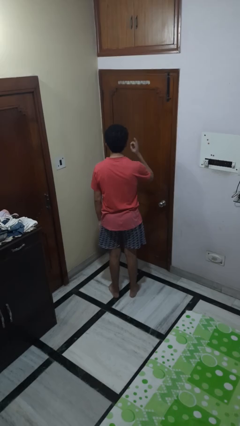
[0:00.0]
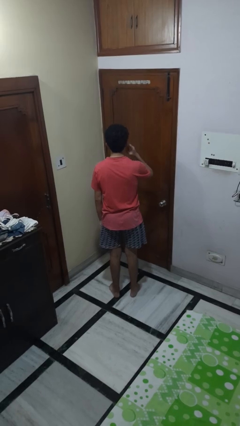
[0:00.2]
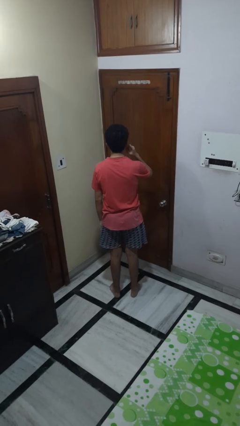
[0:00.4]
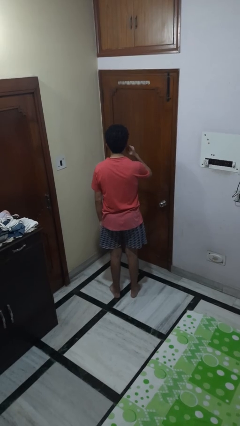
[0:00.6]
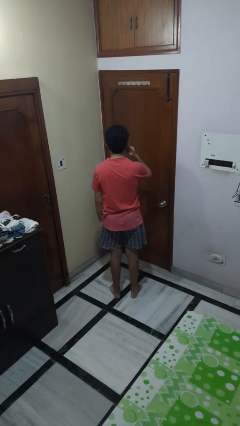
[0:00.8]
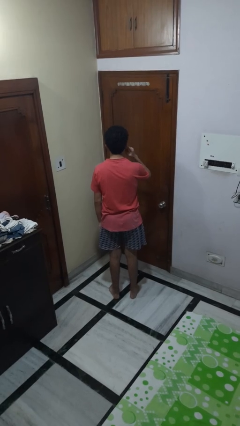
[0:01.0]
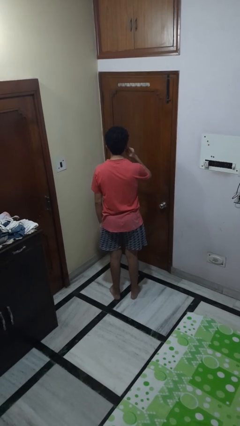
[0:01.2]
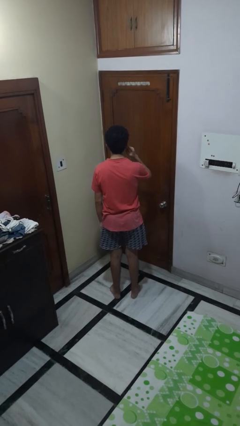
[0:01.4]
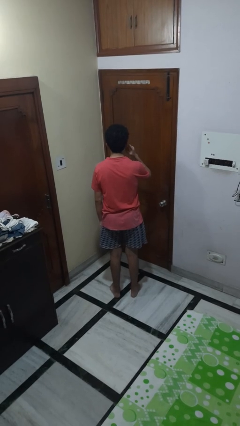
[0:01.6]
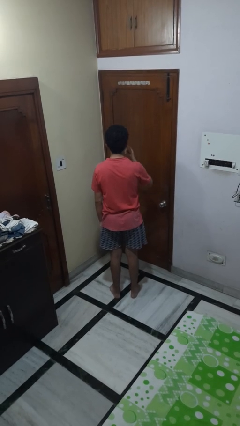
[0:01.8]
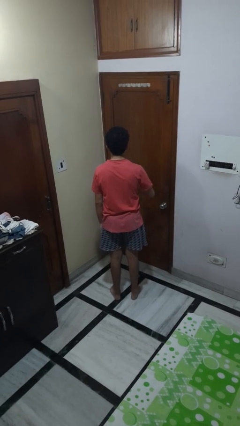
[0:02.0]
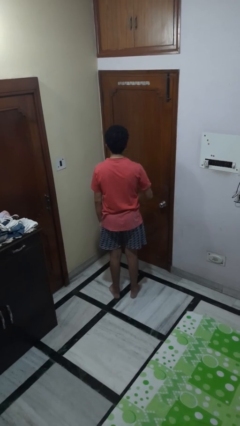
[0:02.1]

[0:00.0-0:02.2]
person gestures listen closely

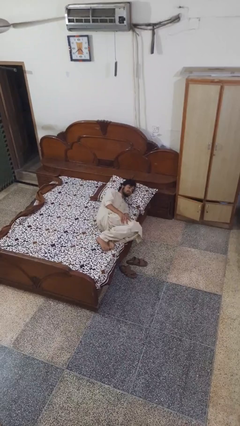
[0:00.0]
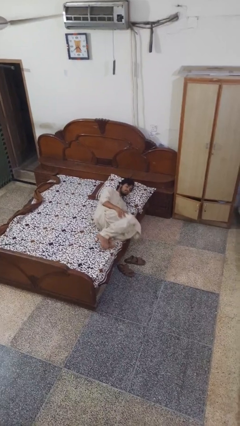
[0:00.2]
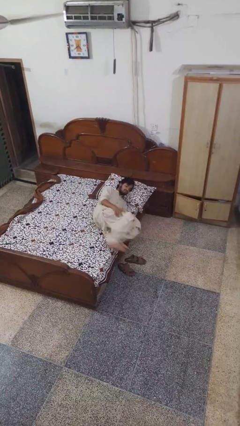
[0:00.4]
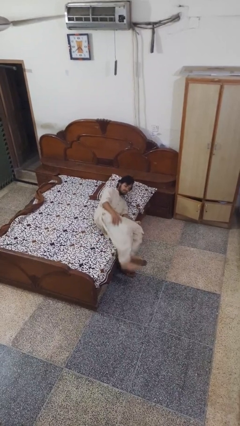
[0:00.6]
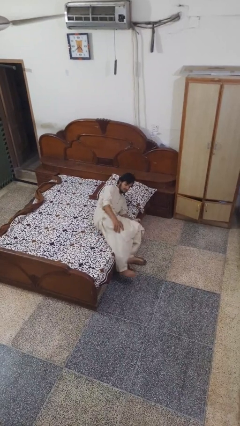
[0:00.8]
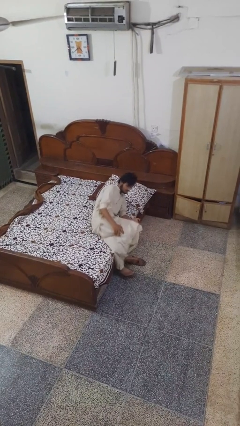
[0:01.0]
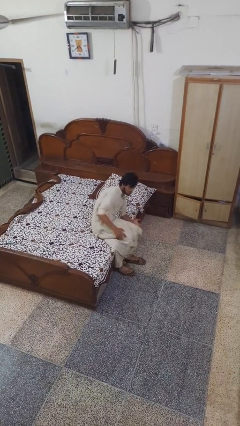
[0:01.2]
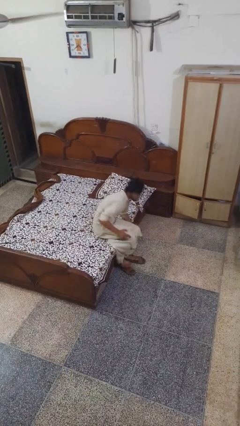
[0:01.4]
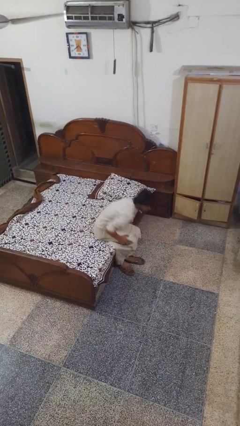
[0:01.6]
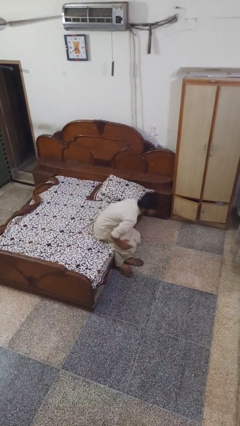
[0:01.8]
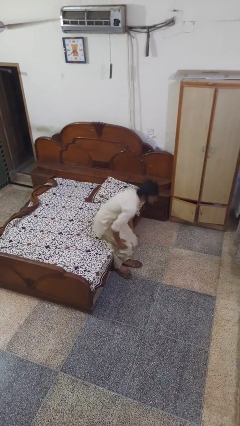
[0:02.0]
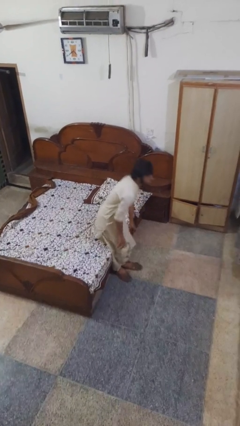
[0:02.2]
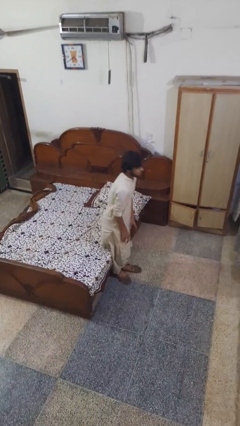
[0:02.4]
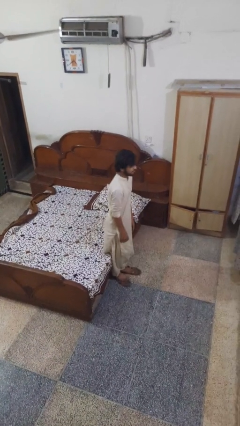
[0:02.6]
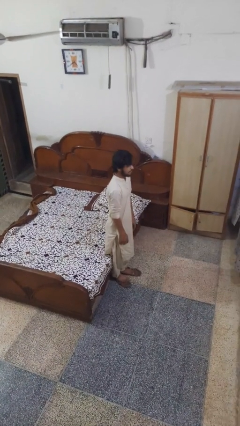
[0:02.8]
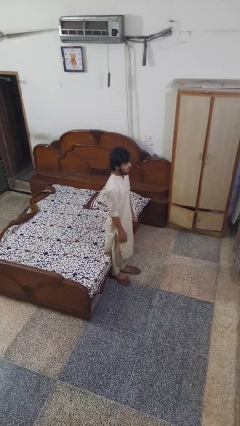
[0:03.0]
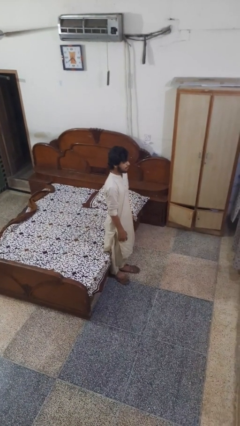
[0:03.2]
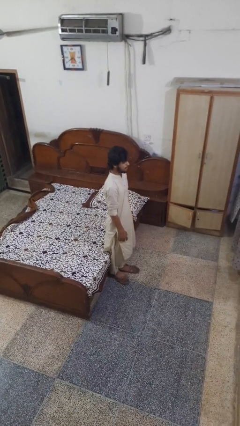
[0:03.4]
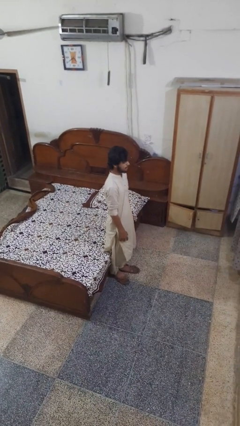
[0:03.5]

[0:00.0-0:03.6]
person stands up

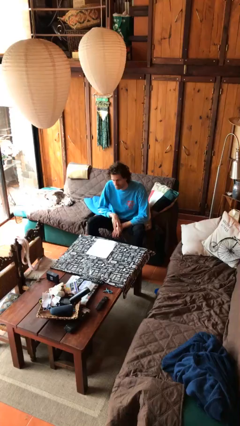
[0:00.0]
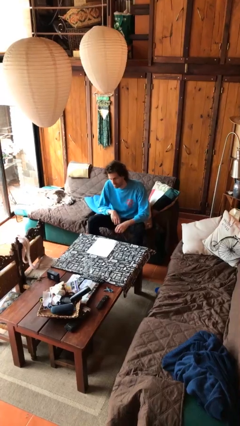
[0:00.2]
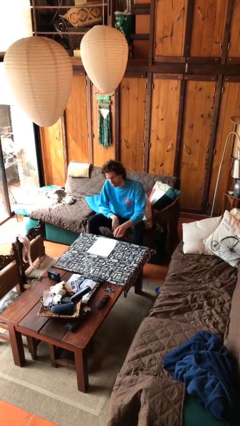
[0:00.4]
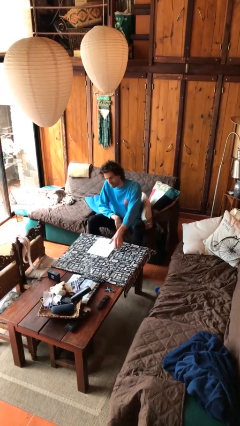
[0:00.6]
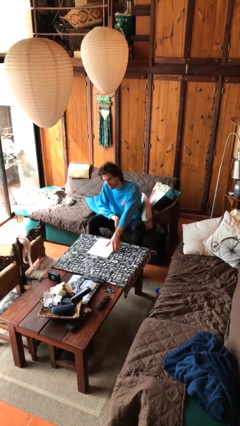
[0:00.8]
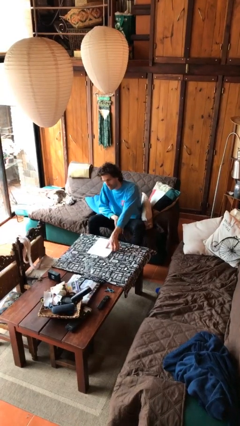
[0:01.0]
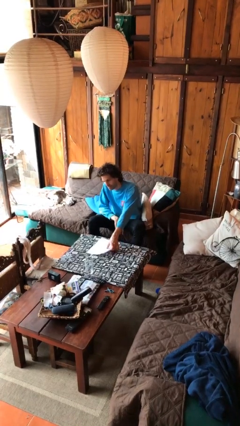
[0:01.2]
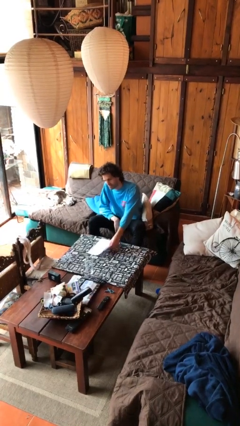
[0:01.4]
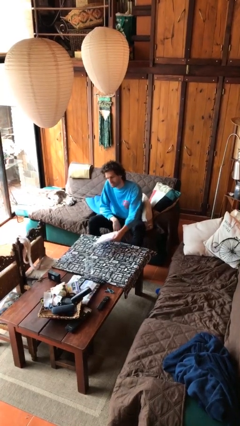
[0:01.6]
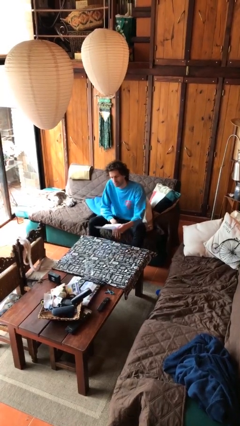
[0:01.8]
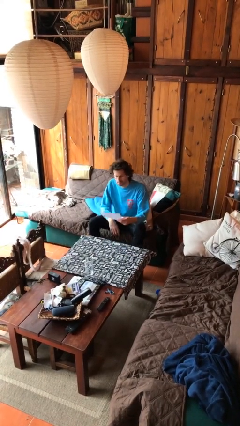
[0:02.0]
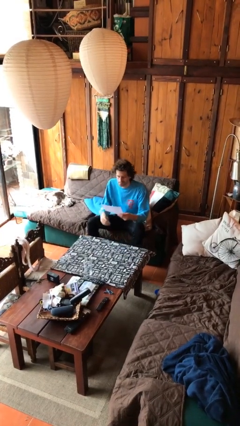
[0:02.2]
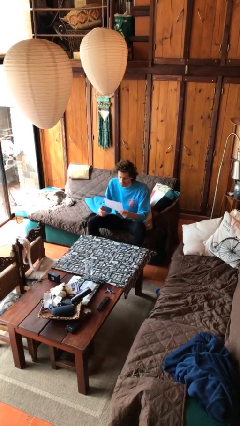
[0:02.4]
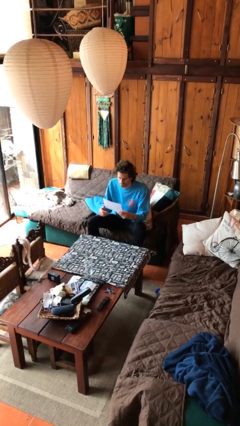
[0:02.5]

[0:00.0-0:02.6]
person picks up object from table

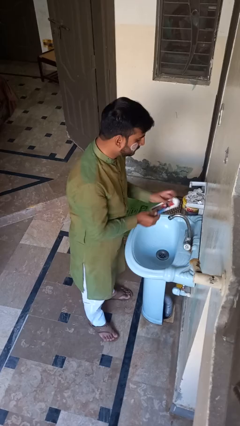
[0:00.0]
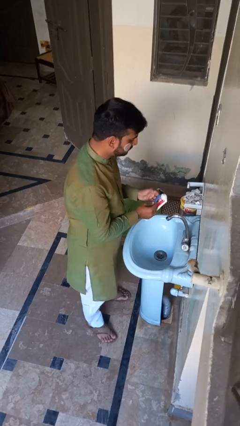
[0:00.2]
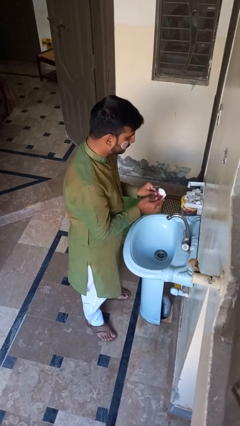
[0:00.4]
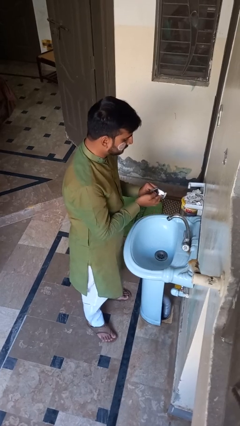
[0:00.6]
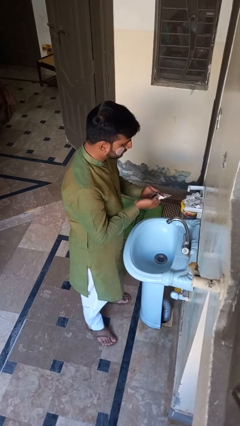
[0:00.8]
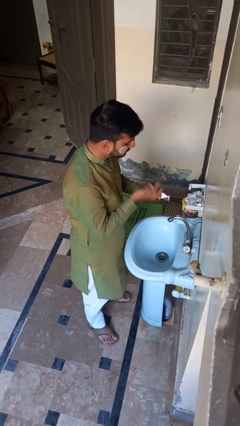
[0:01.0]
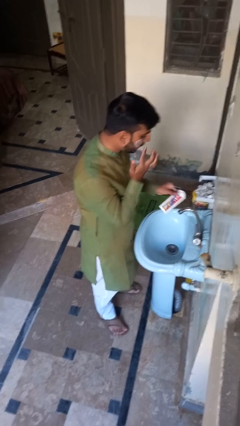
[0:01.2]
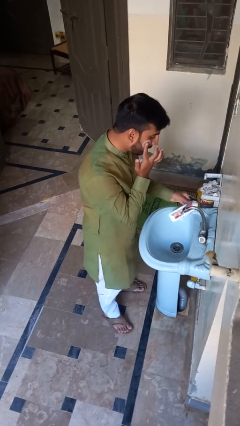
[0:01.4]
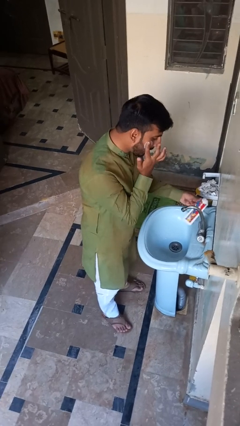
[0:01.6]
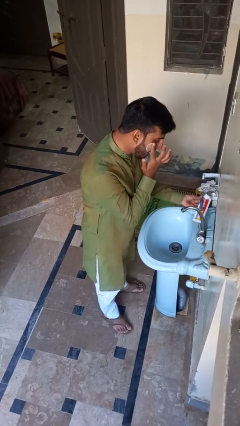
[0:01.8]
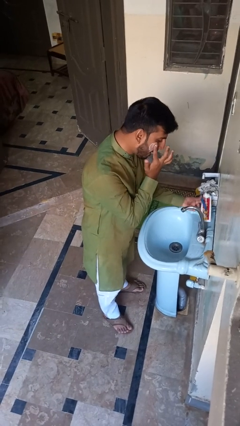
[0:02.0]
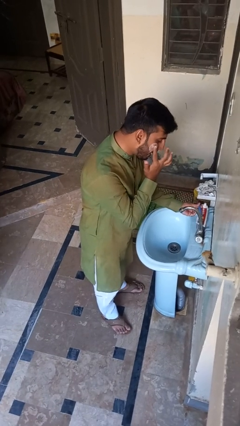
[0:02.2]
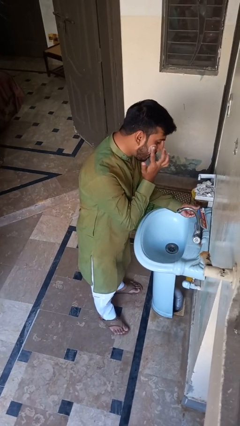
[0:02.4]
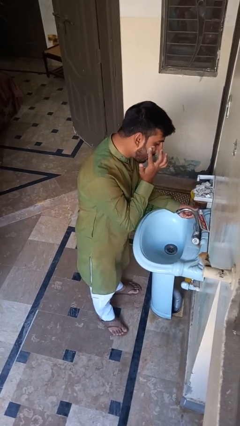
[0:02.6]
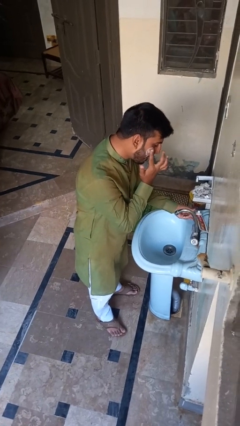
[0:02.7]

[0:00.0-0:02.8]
person applies shaving cream

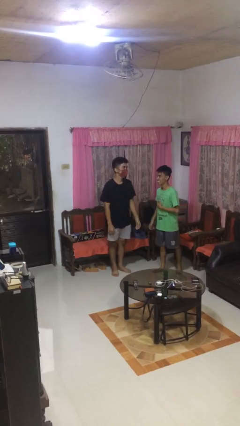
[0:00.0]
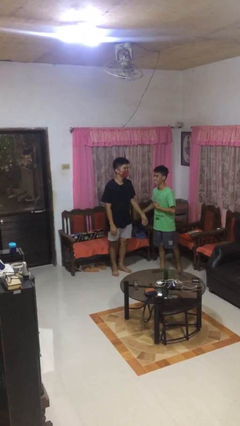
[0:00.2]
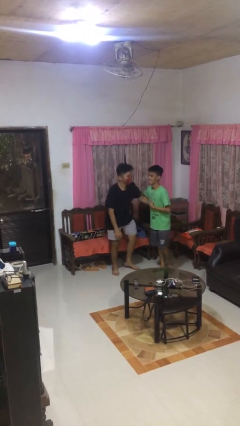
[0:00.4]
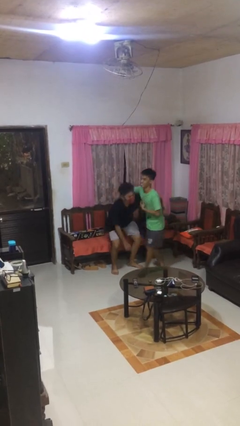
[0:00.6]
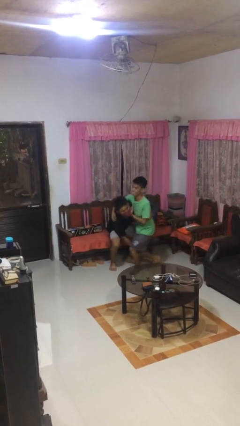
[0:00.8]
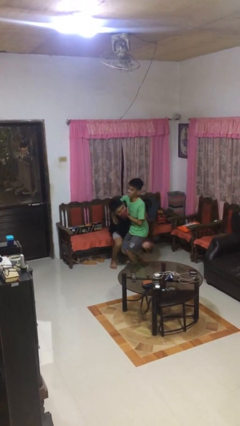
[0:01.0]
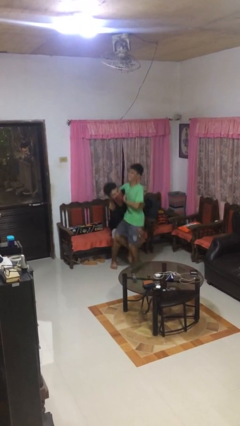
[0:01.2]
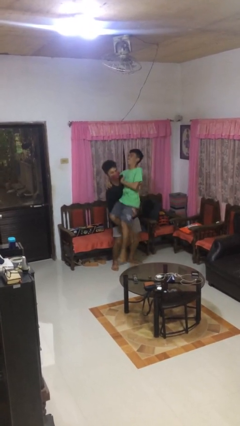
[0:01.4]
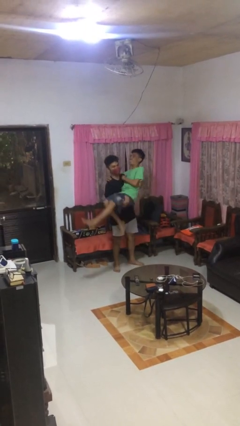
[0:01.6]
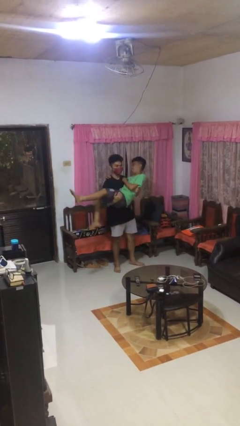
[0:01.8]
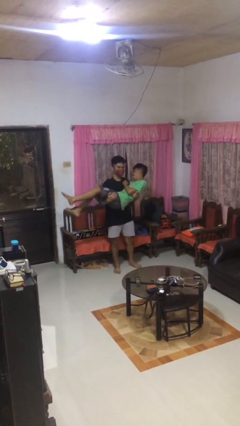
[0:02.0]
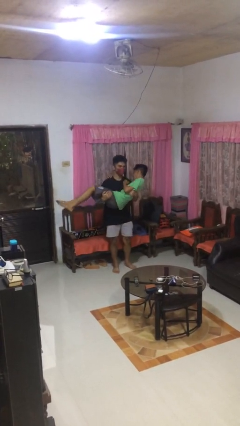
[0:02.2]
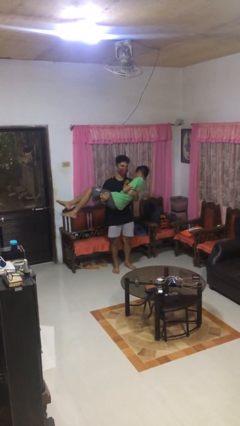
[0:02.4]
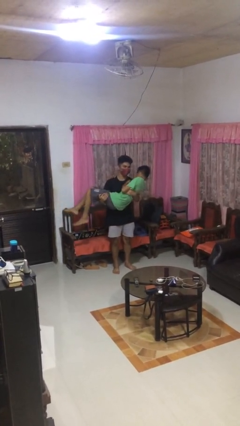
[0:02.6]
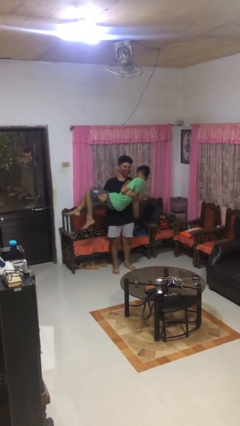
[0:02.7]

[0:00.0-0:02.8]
person picks up person

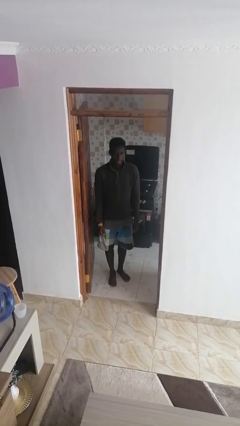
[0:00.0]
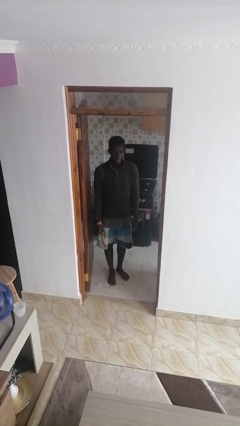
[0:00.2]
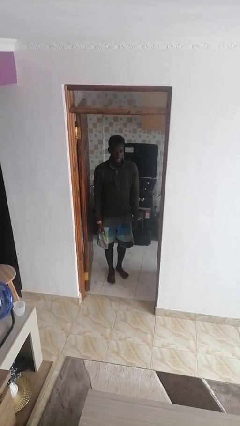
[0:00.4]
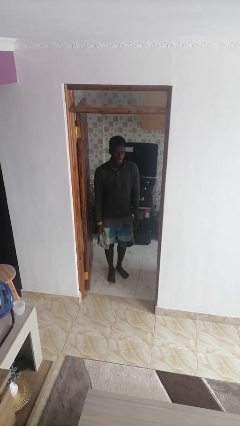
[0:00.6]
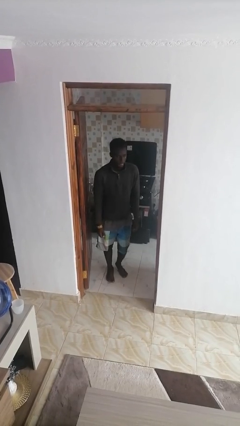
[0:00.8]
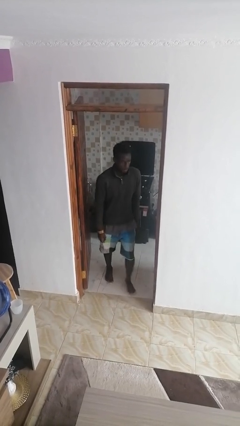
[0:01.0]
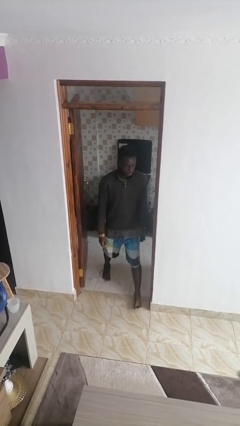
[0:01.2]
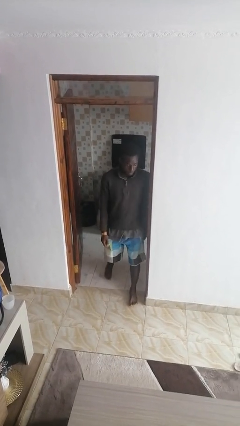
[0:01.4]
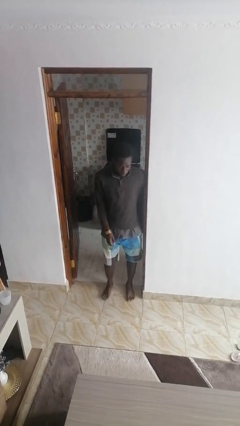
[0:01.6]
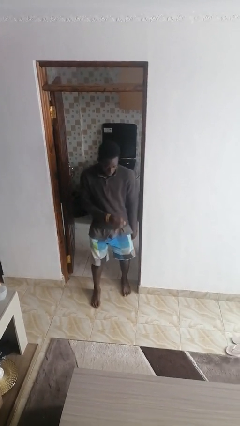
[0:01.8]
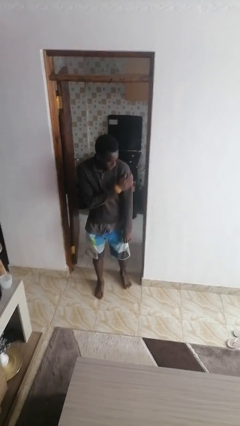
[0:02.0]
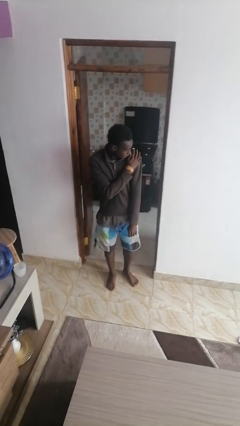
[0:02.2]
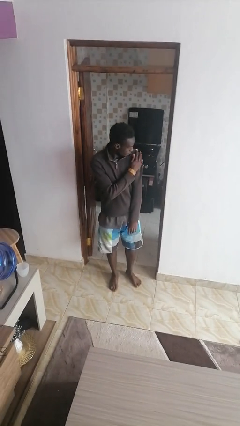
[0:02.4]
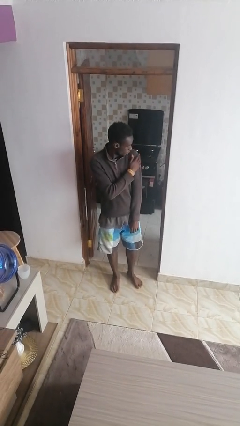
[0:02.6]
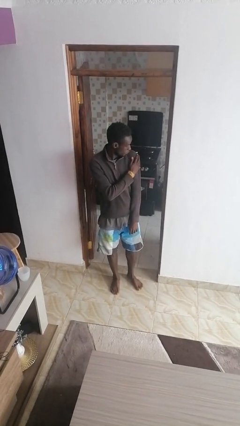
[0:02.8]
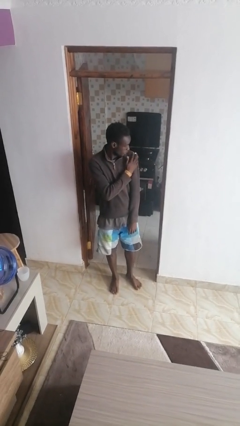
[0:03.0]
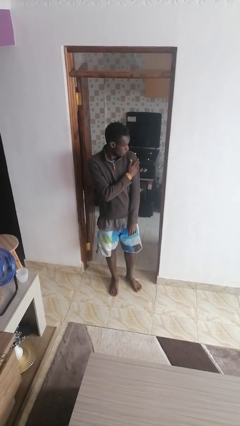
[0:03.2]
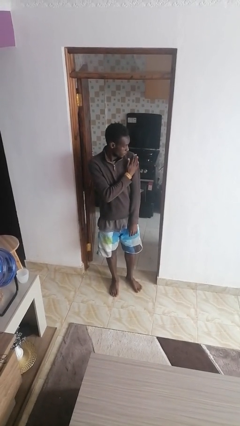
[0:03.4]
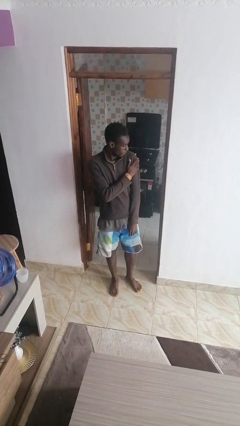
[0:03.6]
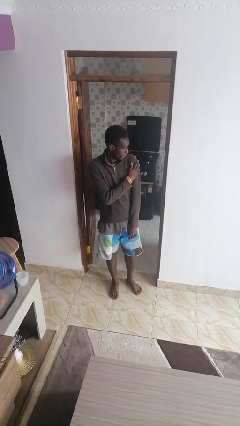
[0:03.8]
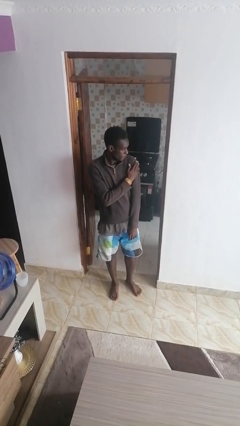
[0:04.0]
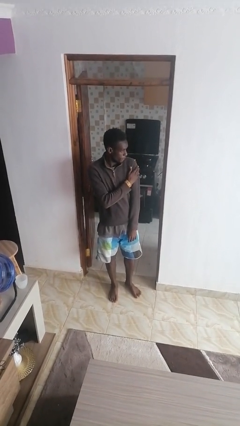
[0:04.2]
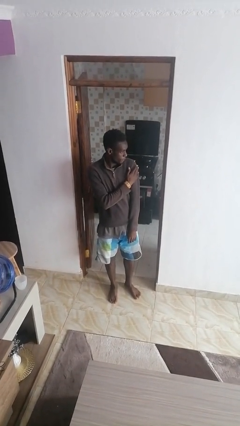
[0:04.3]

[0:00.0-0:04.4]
person bumps into wall
